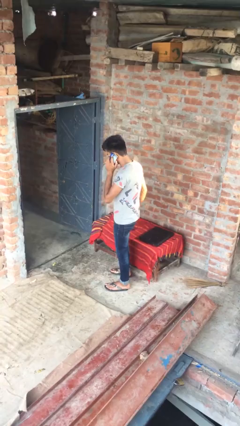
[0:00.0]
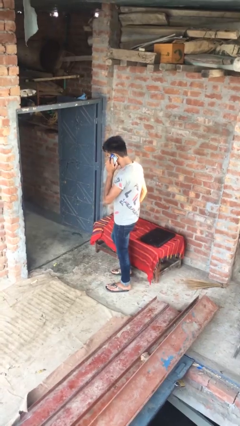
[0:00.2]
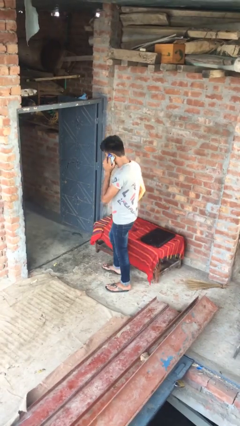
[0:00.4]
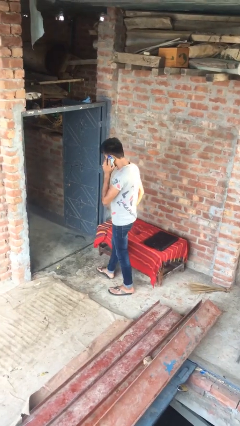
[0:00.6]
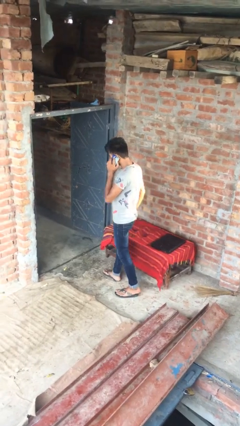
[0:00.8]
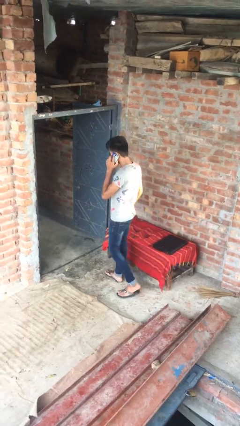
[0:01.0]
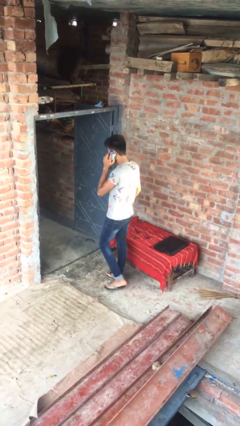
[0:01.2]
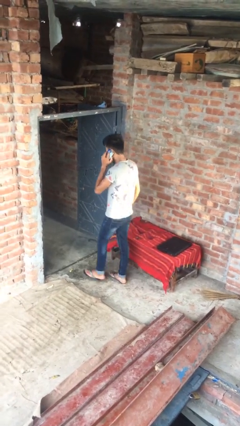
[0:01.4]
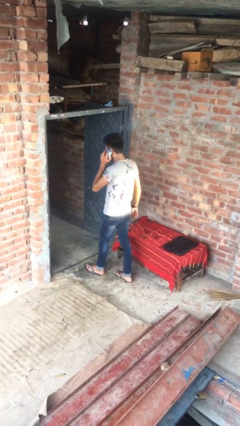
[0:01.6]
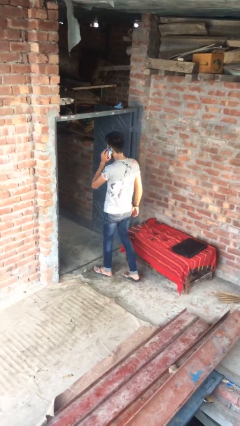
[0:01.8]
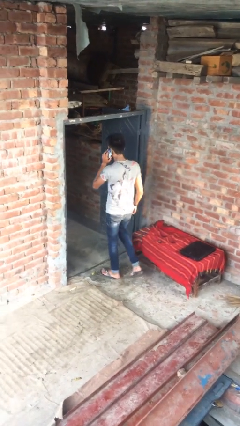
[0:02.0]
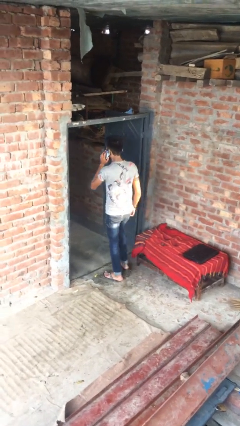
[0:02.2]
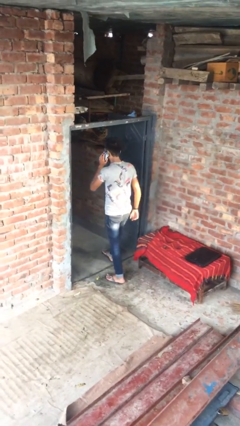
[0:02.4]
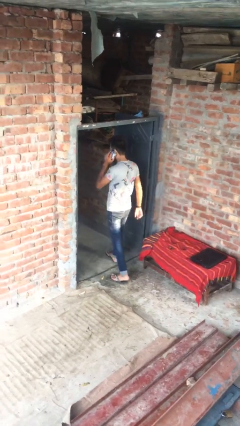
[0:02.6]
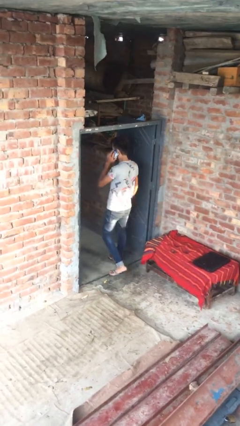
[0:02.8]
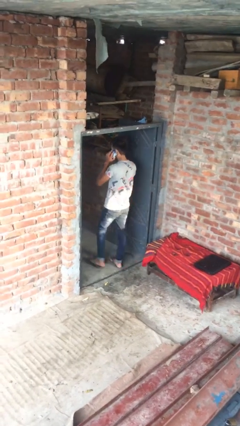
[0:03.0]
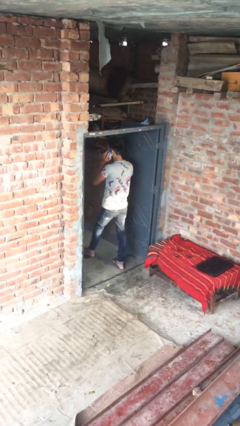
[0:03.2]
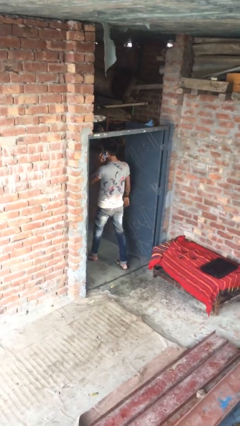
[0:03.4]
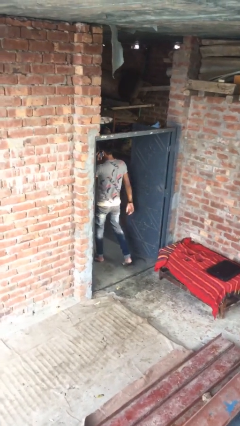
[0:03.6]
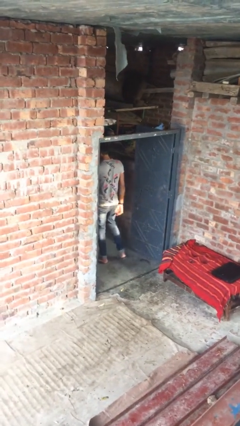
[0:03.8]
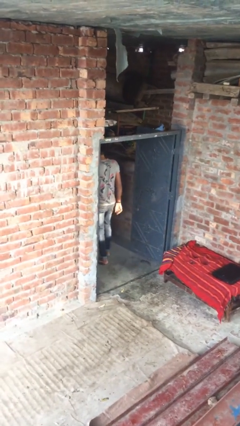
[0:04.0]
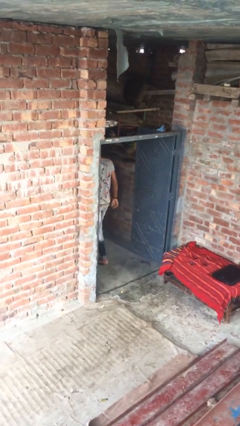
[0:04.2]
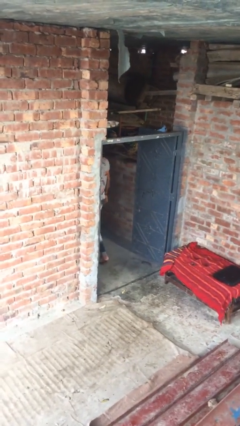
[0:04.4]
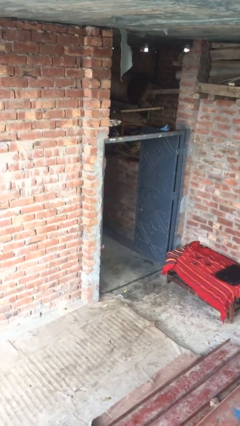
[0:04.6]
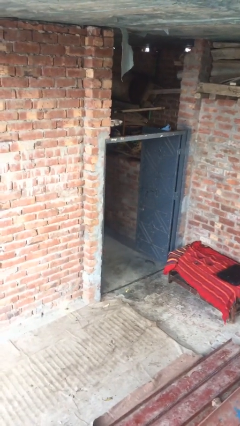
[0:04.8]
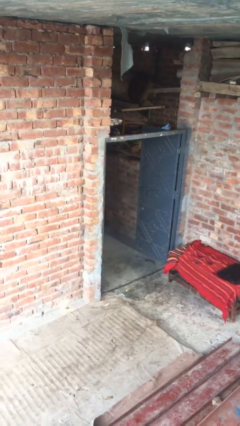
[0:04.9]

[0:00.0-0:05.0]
person exits scene through structure

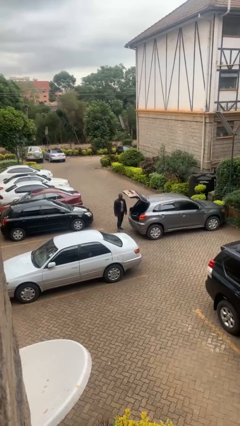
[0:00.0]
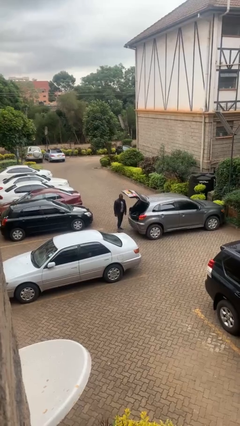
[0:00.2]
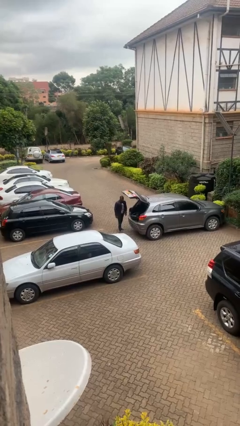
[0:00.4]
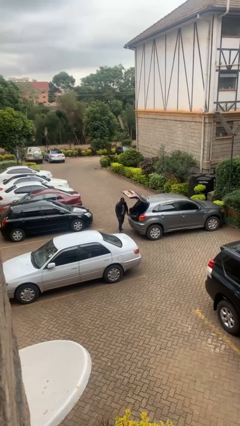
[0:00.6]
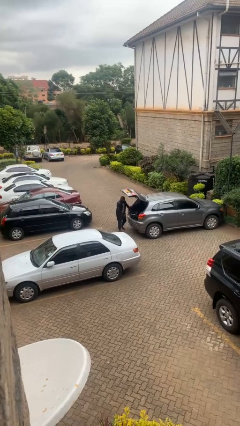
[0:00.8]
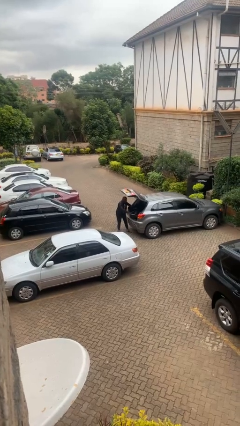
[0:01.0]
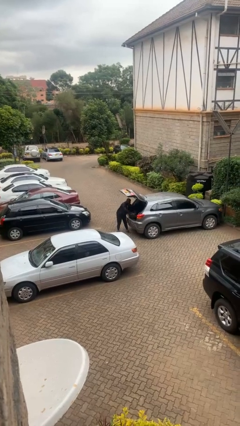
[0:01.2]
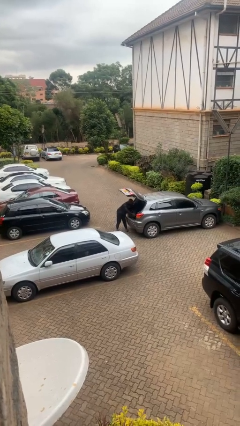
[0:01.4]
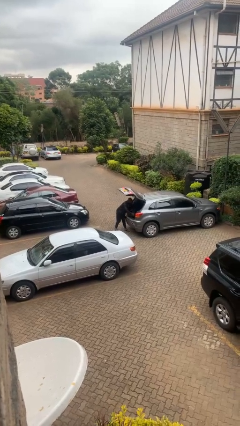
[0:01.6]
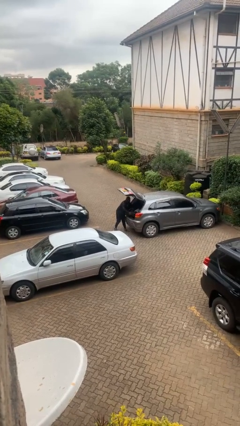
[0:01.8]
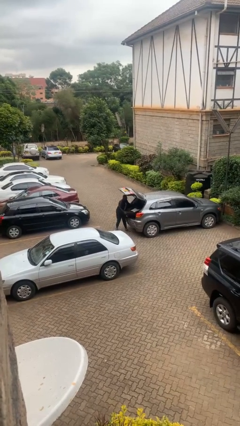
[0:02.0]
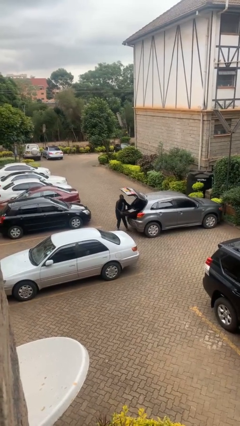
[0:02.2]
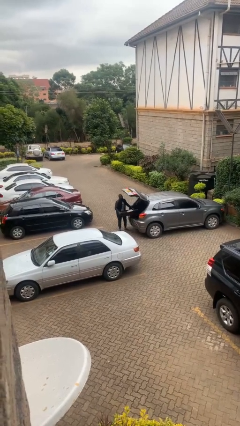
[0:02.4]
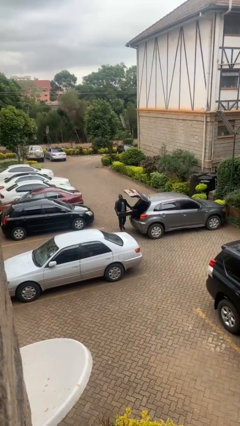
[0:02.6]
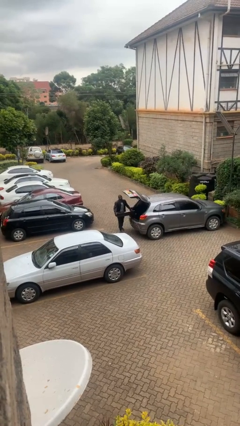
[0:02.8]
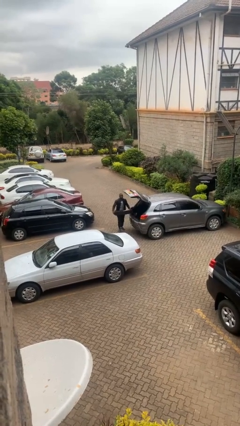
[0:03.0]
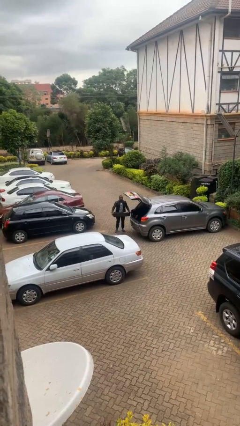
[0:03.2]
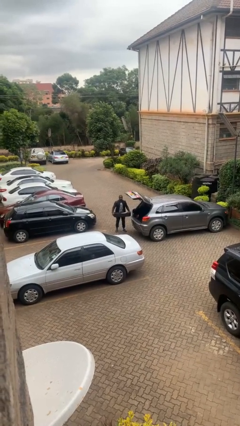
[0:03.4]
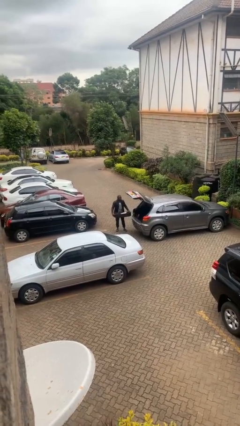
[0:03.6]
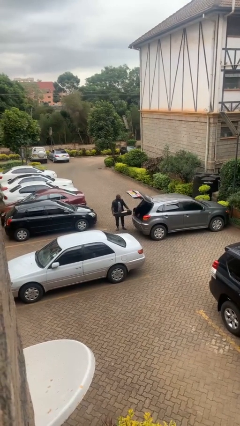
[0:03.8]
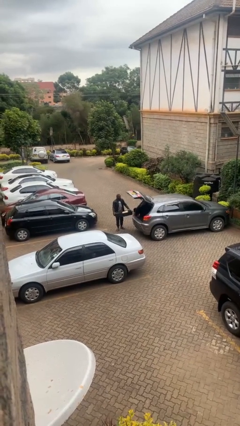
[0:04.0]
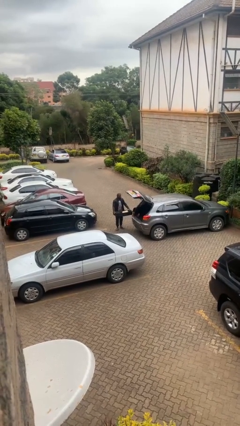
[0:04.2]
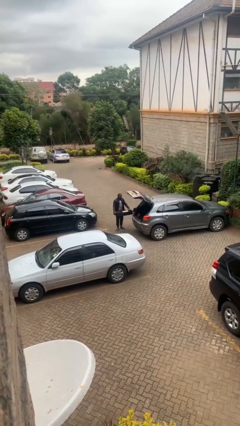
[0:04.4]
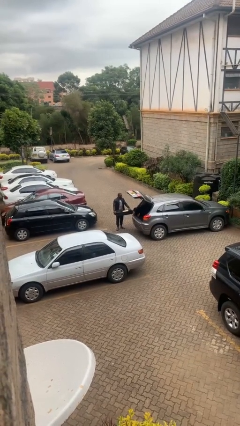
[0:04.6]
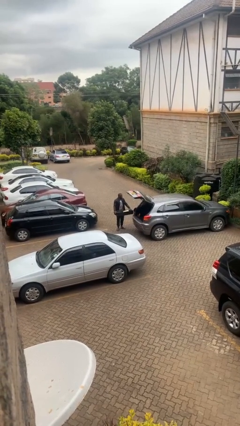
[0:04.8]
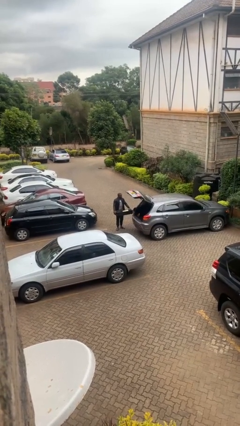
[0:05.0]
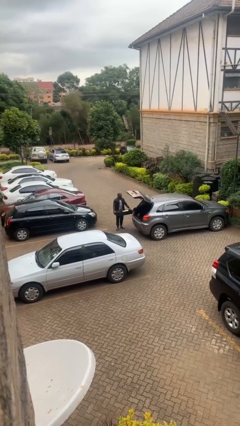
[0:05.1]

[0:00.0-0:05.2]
person unloads car

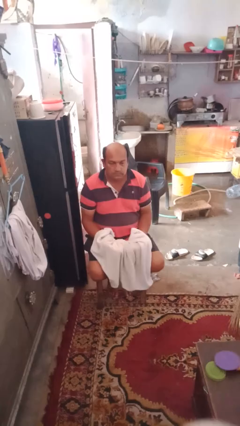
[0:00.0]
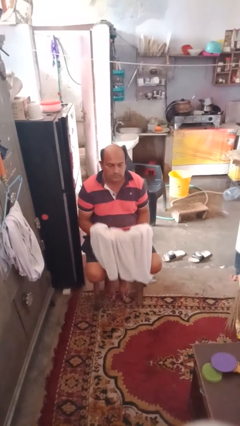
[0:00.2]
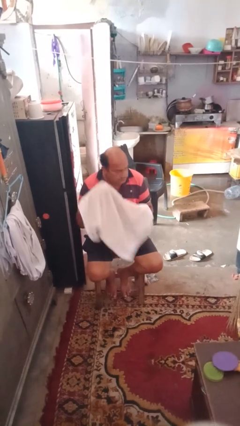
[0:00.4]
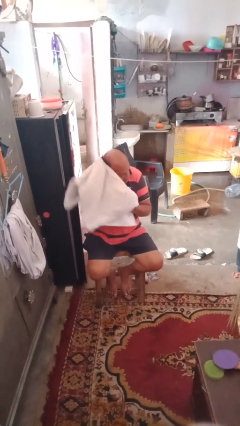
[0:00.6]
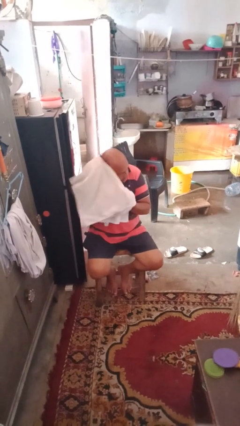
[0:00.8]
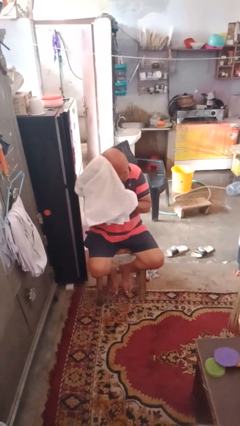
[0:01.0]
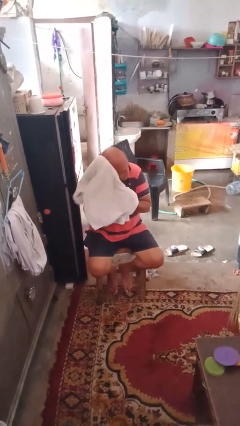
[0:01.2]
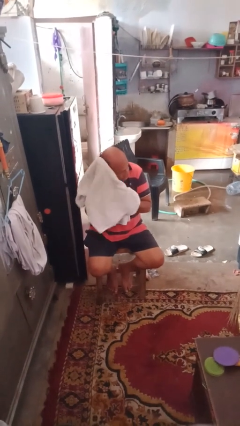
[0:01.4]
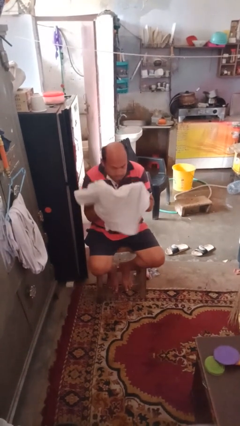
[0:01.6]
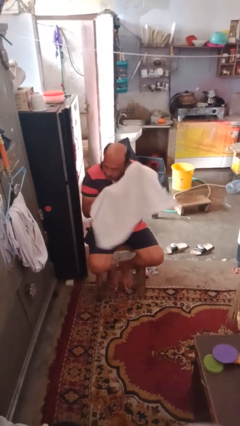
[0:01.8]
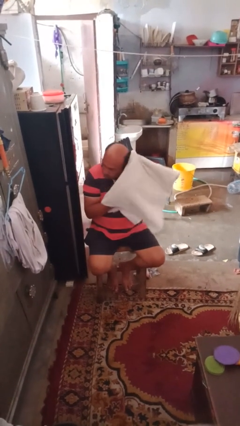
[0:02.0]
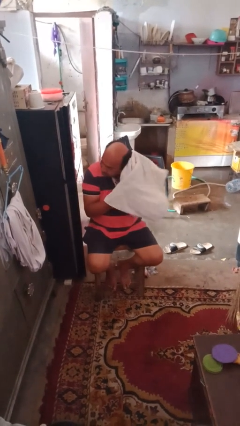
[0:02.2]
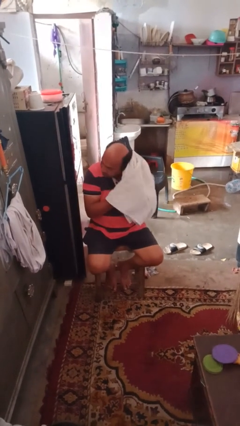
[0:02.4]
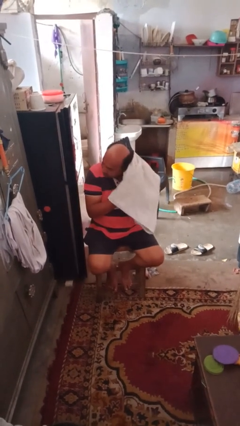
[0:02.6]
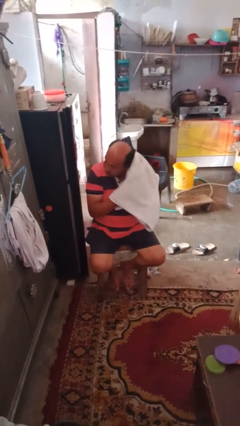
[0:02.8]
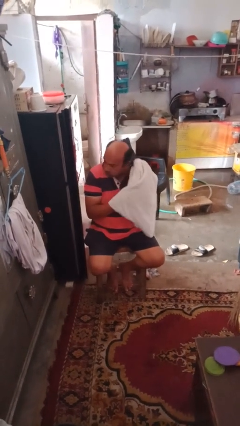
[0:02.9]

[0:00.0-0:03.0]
person dries hair with towel

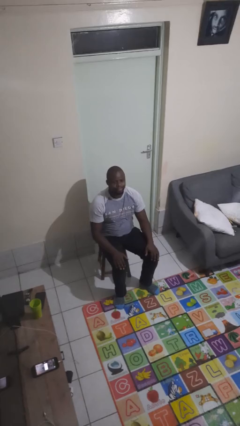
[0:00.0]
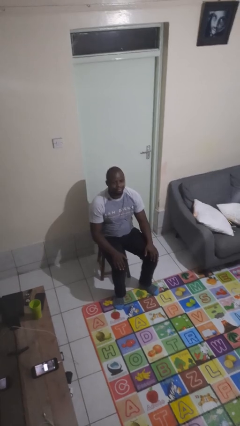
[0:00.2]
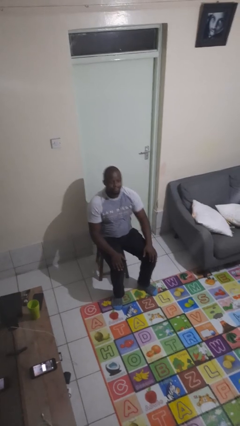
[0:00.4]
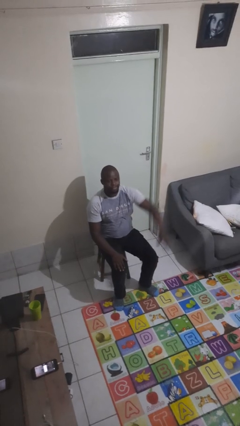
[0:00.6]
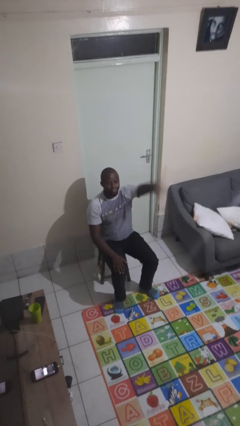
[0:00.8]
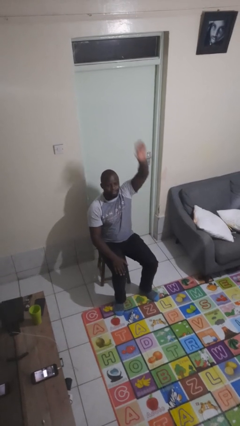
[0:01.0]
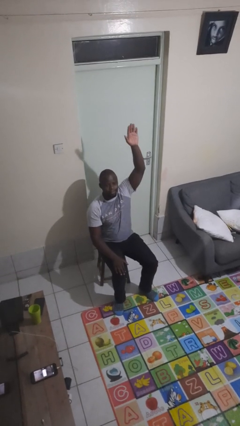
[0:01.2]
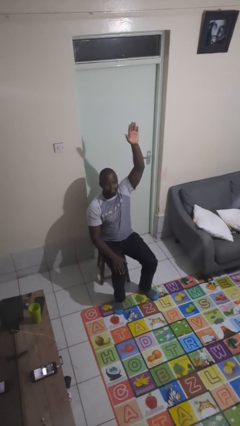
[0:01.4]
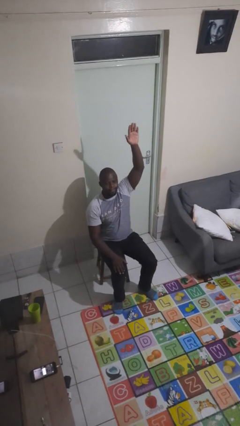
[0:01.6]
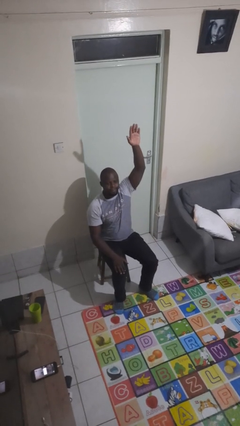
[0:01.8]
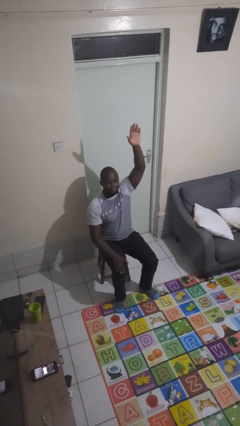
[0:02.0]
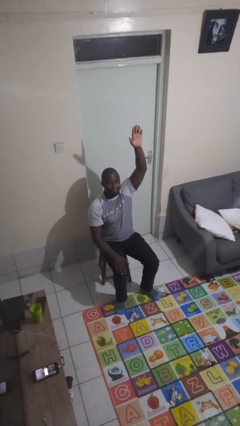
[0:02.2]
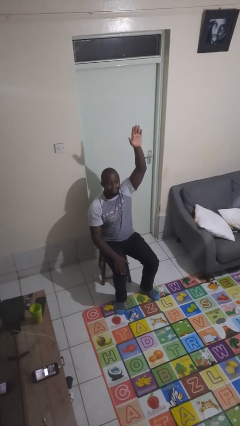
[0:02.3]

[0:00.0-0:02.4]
person gestures raise hand

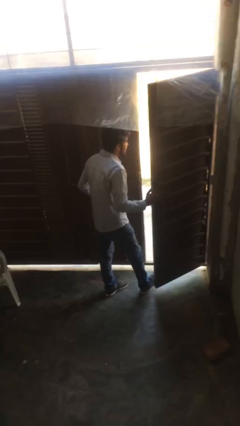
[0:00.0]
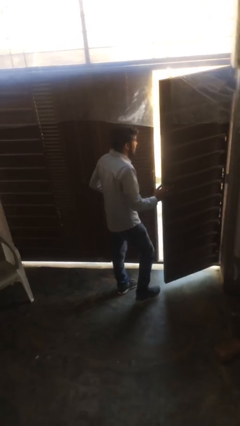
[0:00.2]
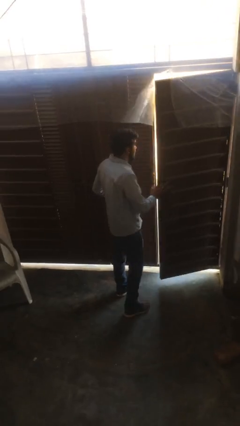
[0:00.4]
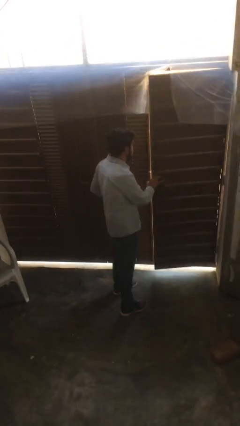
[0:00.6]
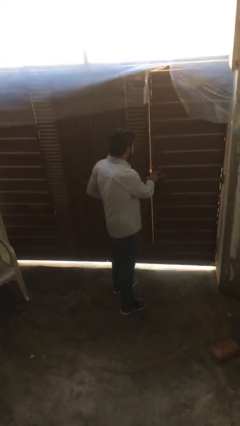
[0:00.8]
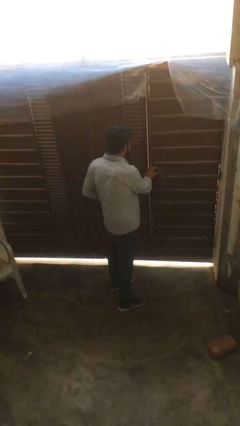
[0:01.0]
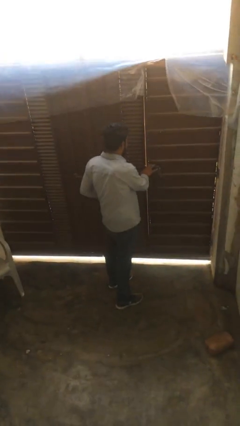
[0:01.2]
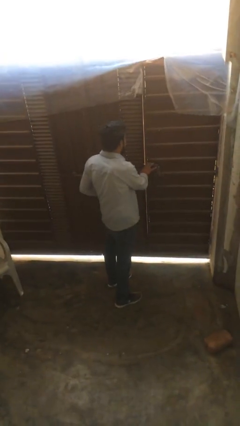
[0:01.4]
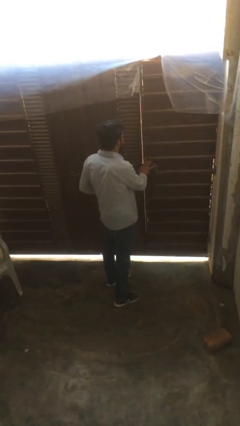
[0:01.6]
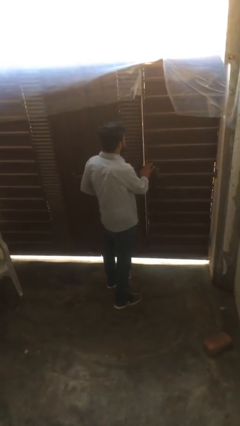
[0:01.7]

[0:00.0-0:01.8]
person closes facility door
